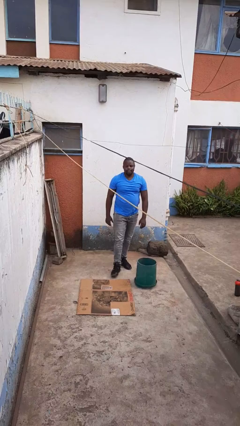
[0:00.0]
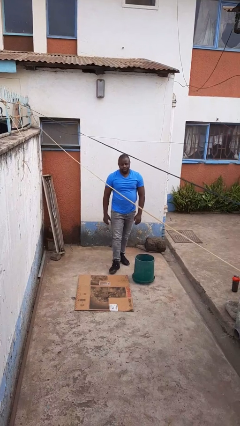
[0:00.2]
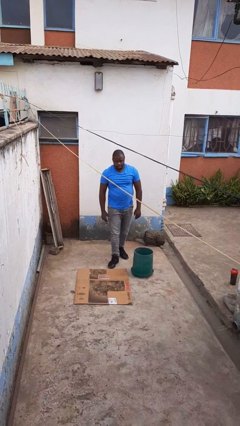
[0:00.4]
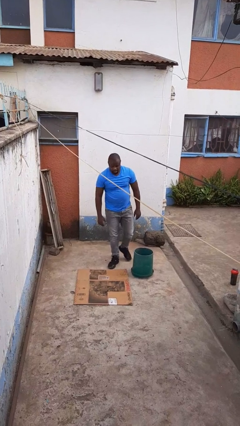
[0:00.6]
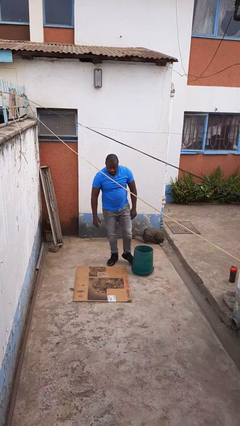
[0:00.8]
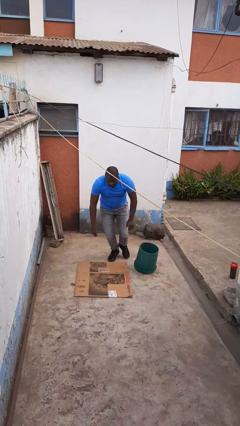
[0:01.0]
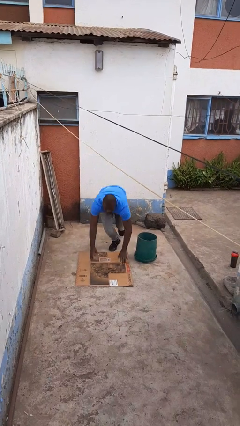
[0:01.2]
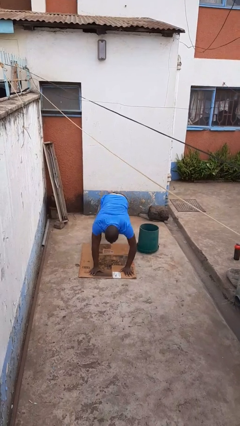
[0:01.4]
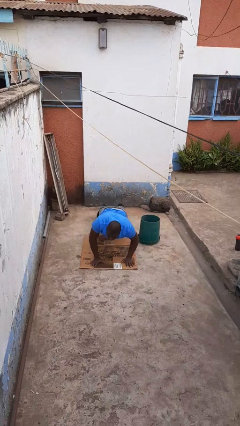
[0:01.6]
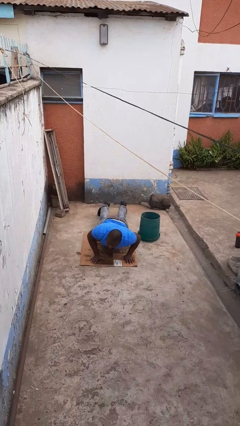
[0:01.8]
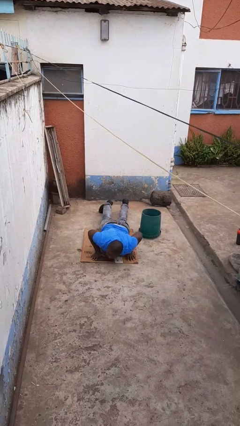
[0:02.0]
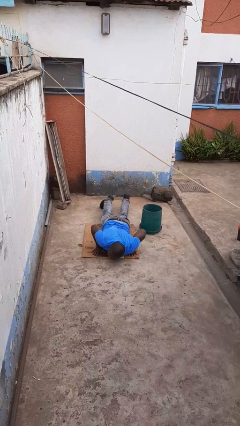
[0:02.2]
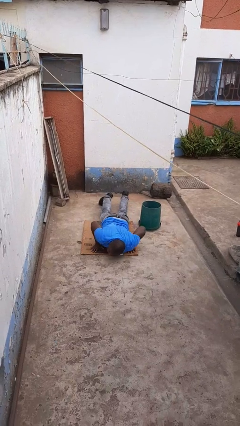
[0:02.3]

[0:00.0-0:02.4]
person trips on object on floor

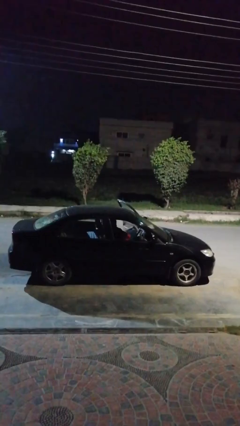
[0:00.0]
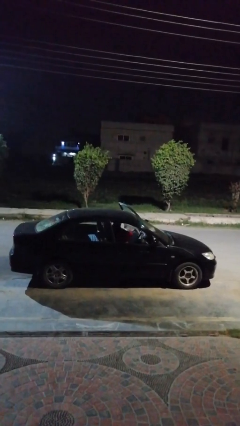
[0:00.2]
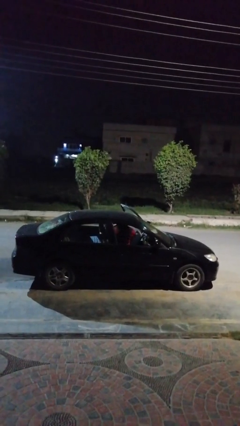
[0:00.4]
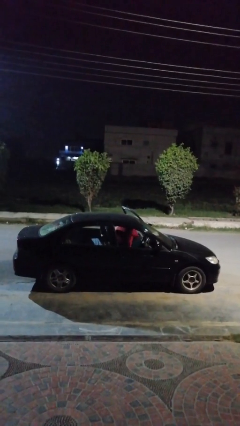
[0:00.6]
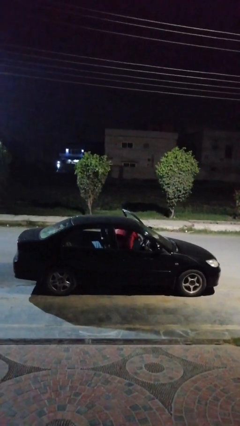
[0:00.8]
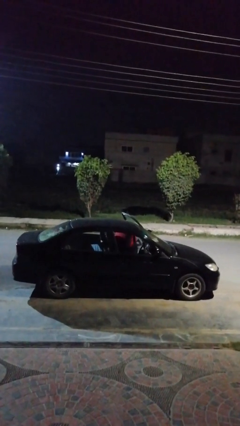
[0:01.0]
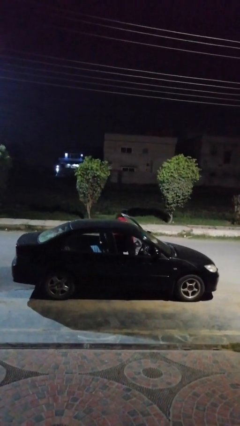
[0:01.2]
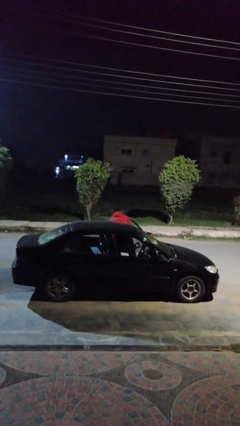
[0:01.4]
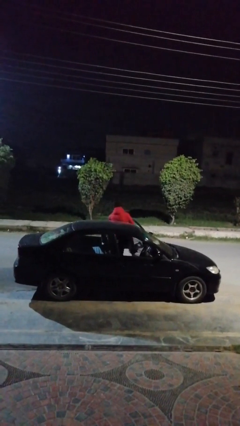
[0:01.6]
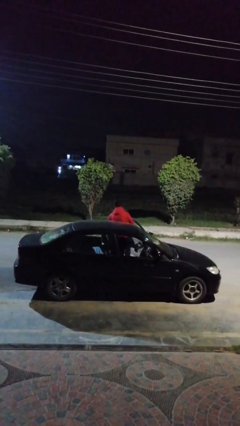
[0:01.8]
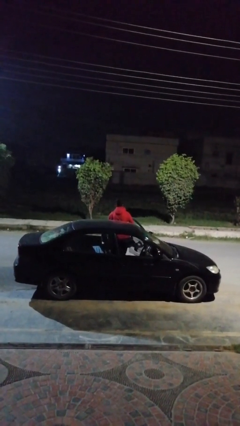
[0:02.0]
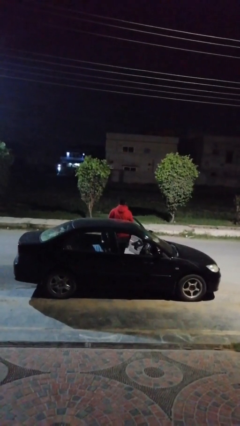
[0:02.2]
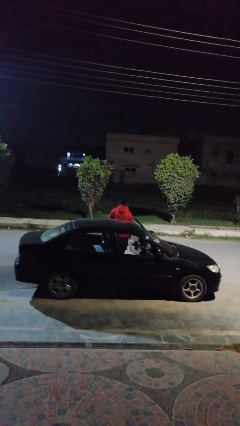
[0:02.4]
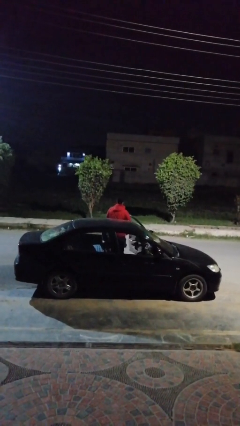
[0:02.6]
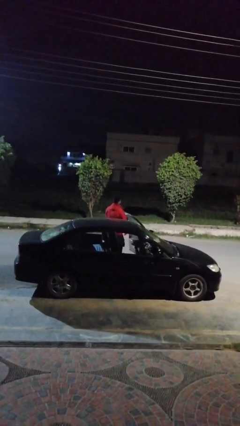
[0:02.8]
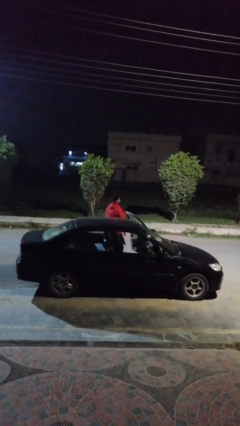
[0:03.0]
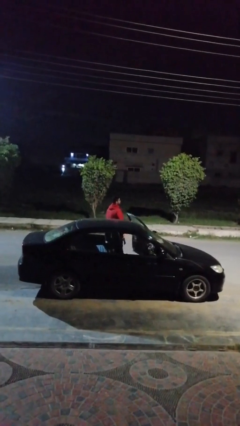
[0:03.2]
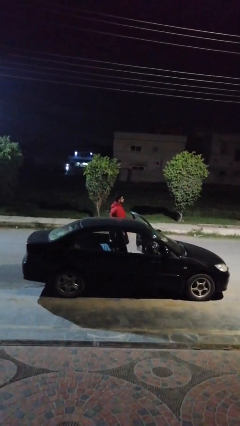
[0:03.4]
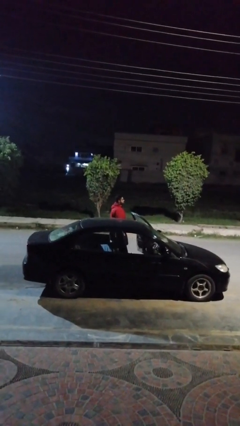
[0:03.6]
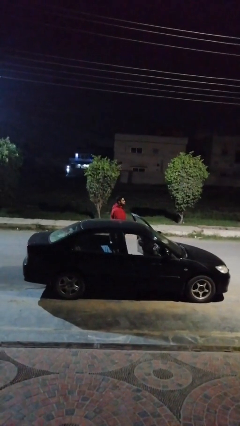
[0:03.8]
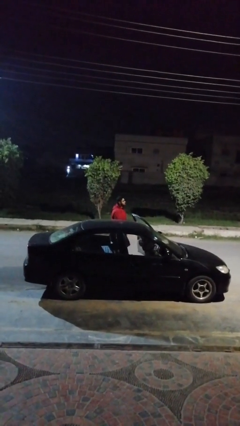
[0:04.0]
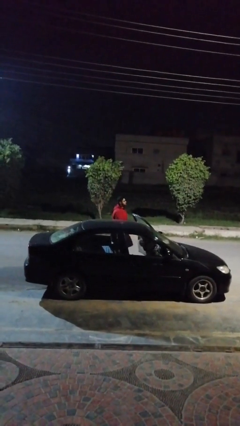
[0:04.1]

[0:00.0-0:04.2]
person exits car

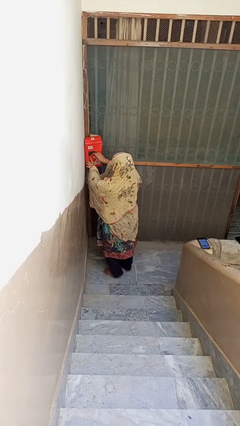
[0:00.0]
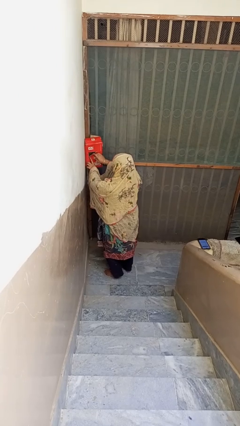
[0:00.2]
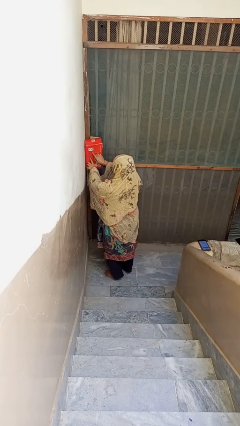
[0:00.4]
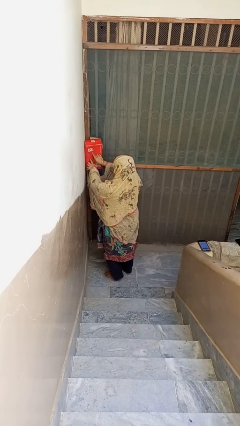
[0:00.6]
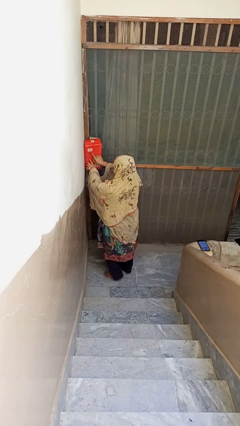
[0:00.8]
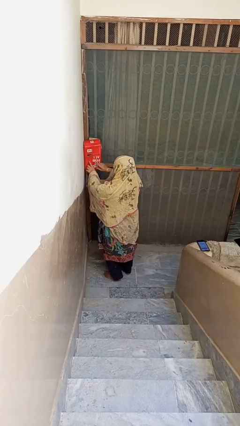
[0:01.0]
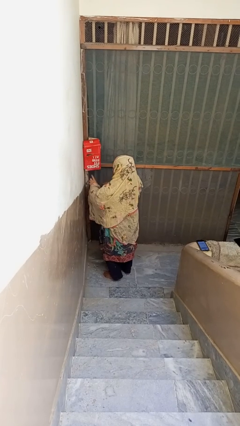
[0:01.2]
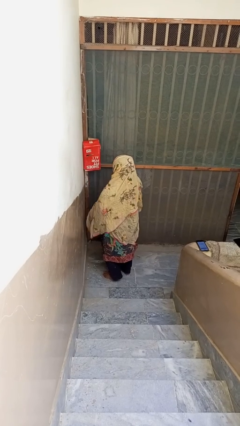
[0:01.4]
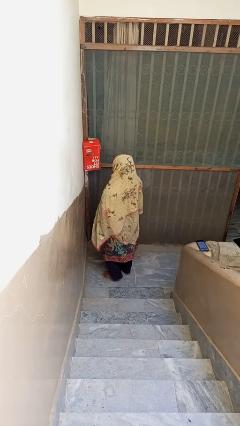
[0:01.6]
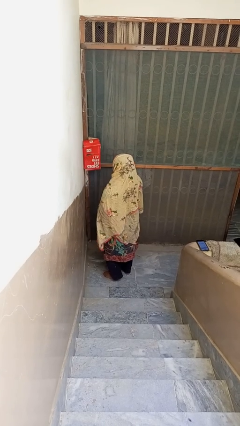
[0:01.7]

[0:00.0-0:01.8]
person closes mailbox

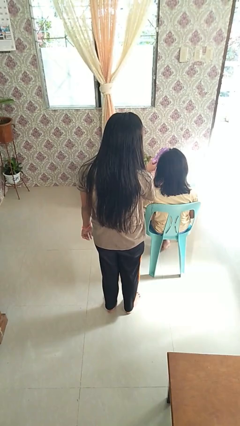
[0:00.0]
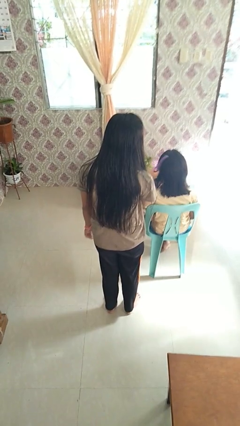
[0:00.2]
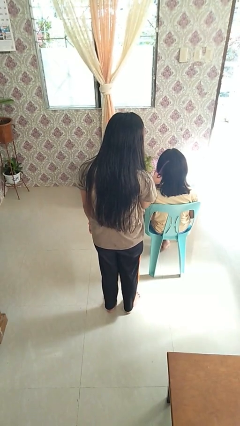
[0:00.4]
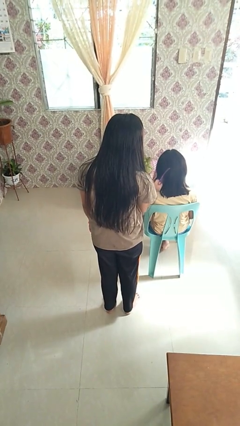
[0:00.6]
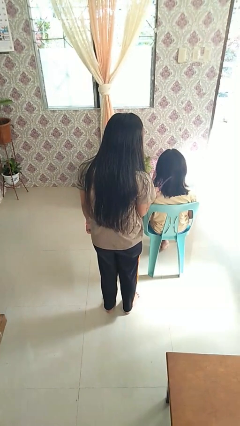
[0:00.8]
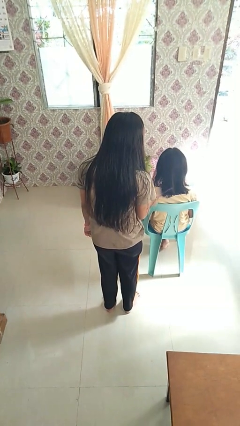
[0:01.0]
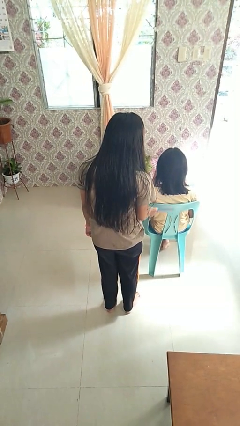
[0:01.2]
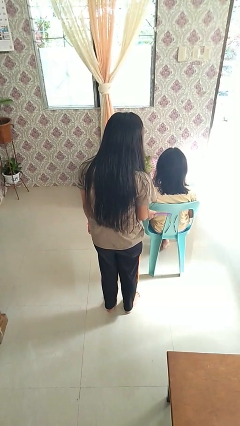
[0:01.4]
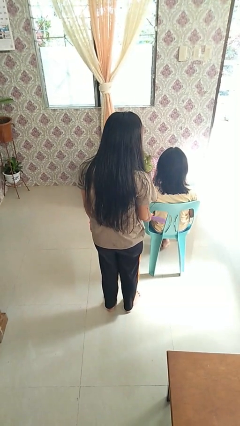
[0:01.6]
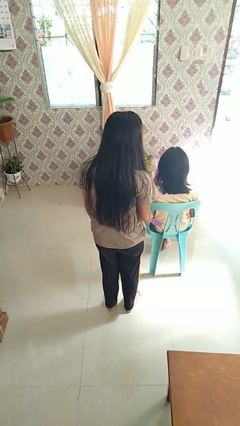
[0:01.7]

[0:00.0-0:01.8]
person brushes hair of person

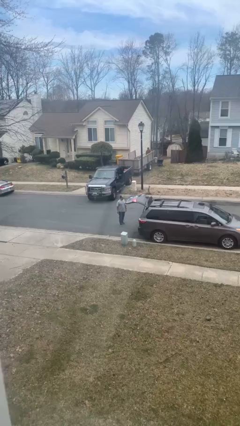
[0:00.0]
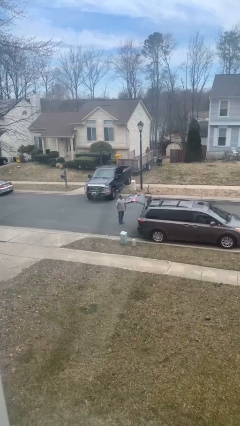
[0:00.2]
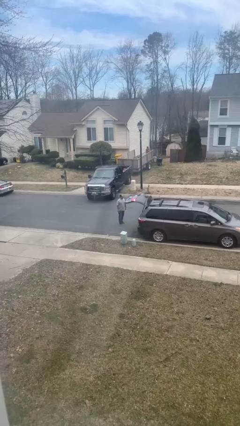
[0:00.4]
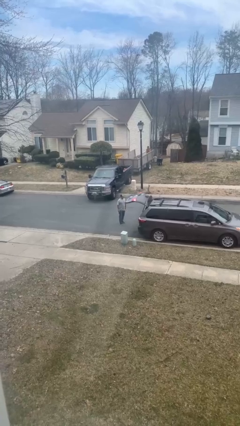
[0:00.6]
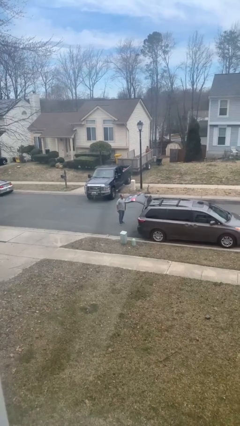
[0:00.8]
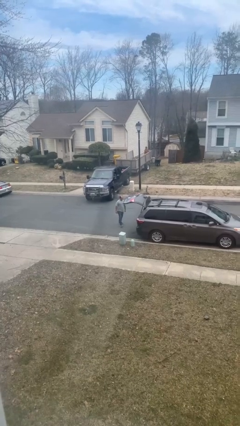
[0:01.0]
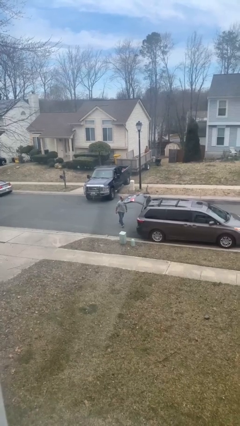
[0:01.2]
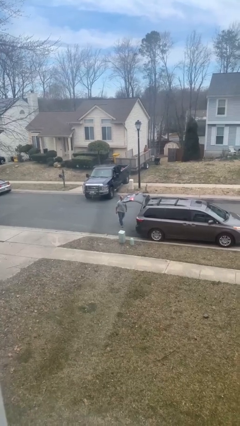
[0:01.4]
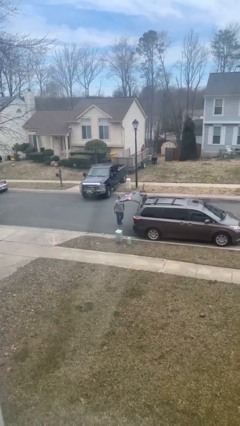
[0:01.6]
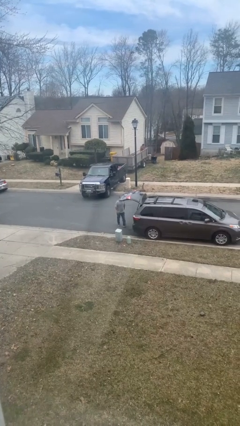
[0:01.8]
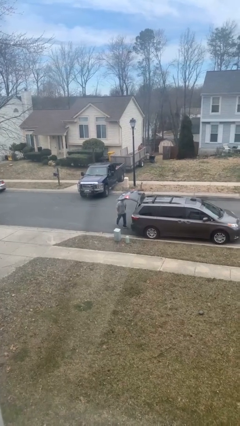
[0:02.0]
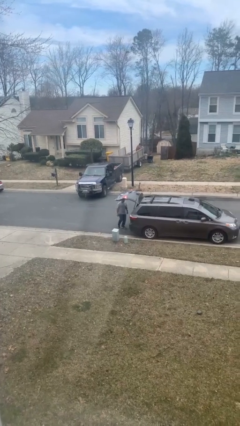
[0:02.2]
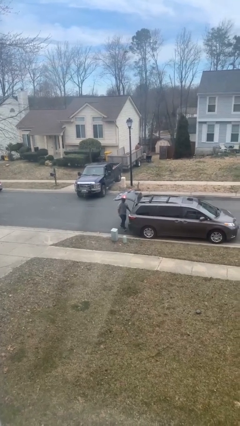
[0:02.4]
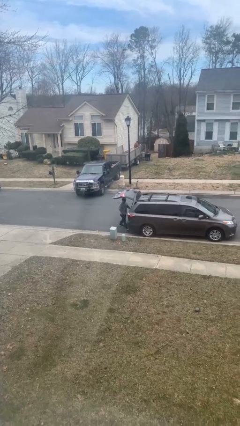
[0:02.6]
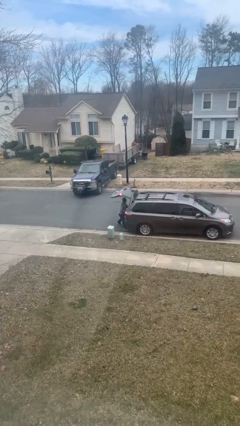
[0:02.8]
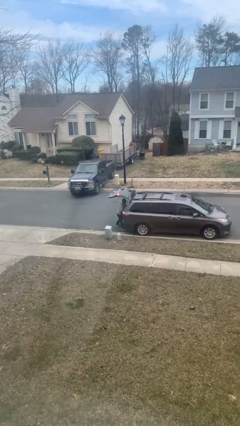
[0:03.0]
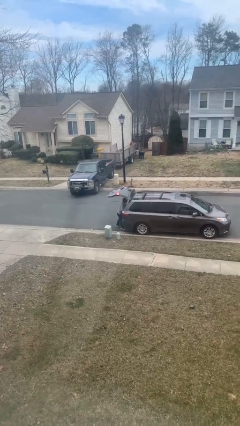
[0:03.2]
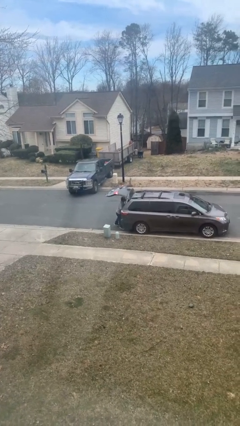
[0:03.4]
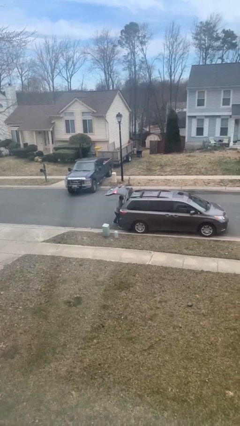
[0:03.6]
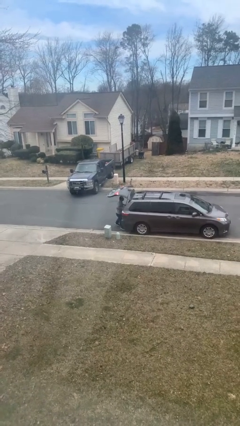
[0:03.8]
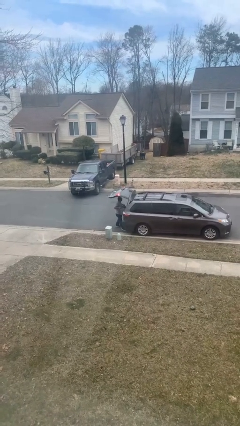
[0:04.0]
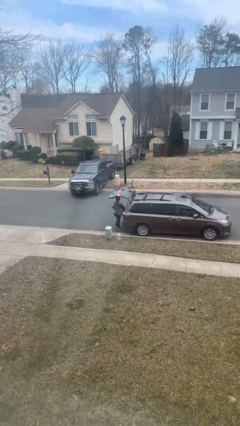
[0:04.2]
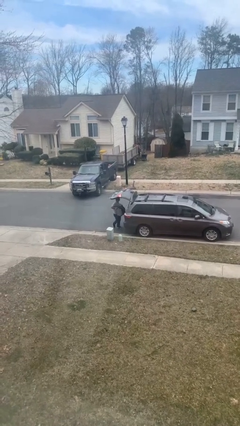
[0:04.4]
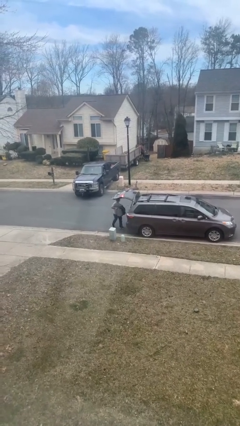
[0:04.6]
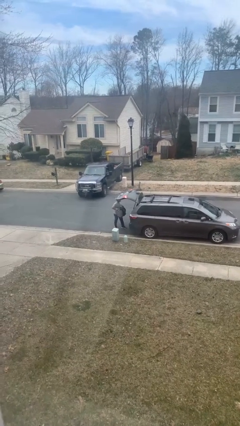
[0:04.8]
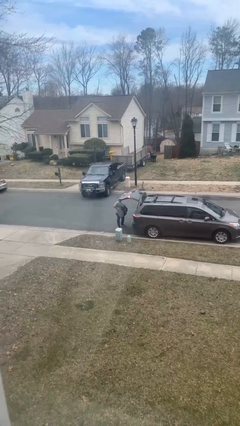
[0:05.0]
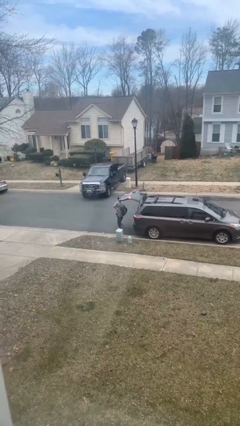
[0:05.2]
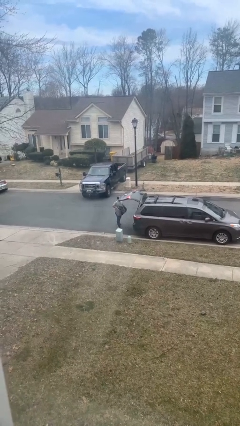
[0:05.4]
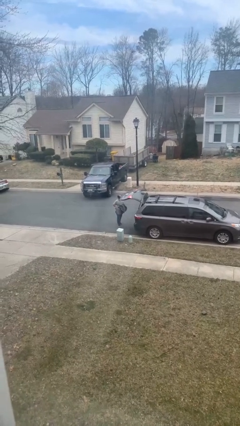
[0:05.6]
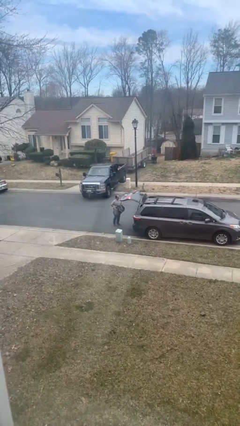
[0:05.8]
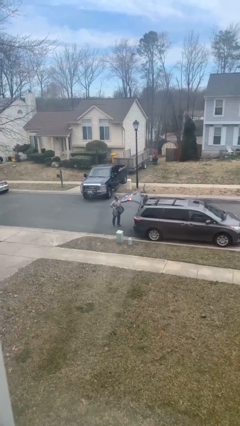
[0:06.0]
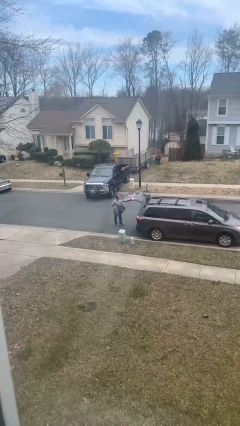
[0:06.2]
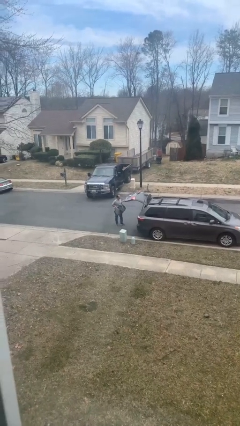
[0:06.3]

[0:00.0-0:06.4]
person unloads car

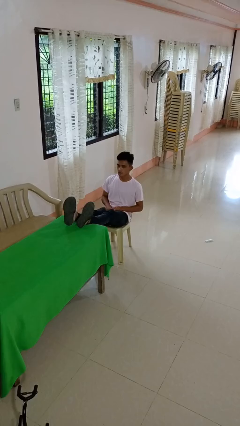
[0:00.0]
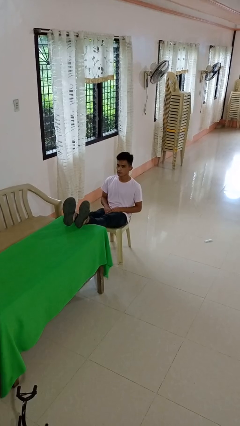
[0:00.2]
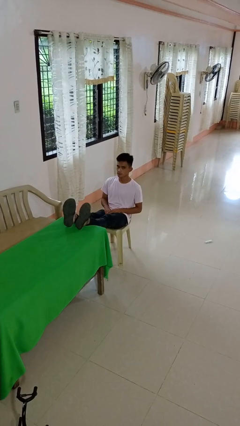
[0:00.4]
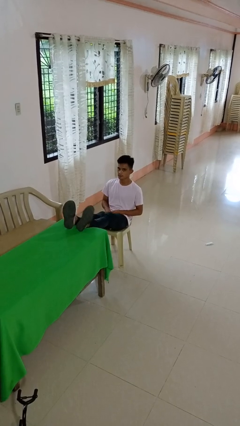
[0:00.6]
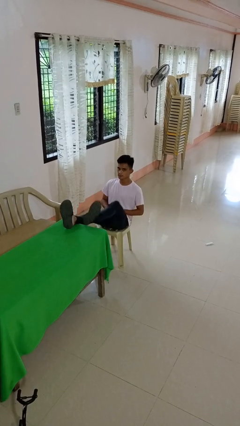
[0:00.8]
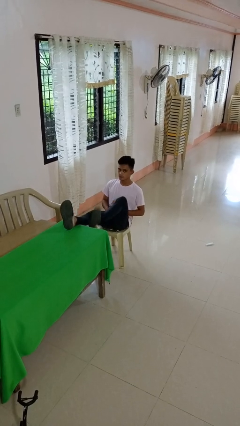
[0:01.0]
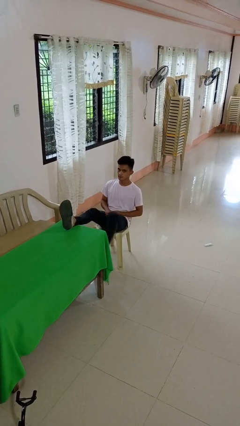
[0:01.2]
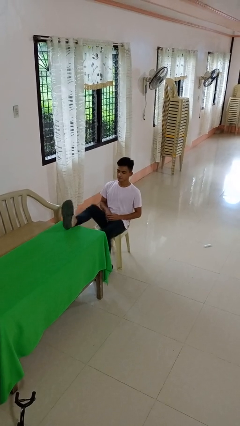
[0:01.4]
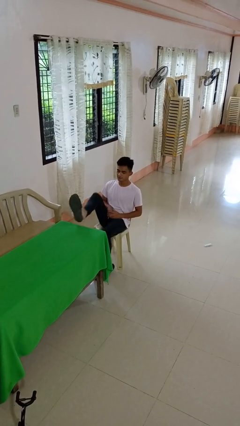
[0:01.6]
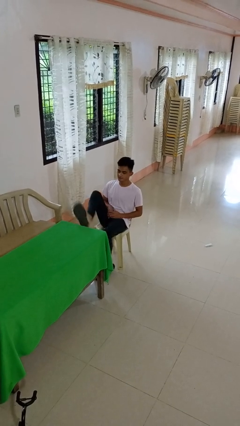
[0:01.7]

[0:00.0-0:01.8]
person puts feet up
